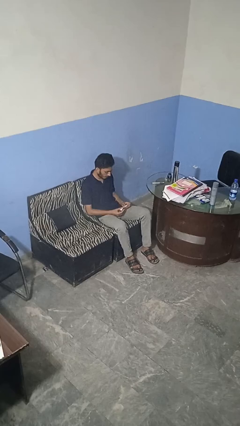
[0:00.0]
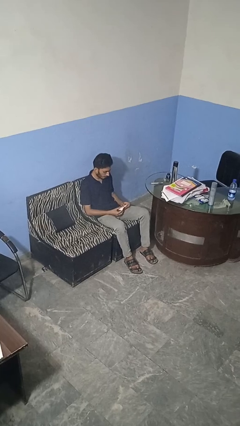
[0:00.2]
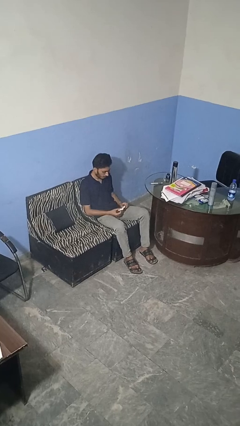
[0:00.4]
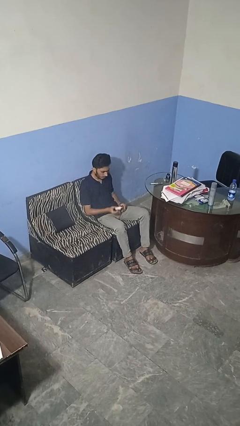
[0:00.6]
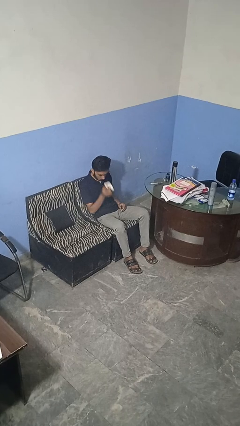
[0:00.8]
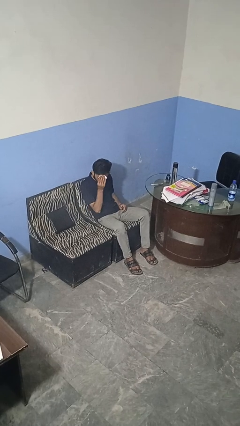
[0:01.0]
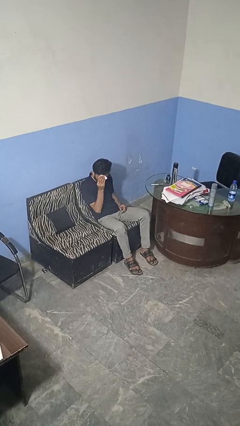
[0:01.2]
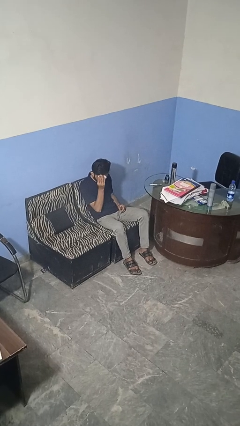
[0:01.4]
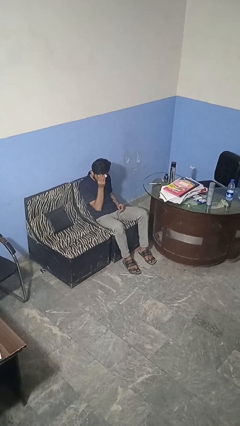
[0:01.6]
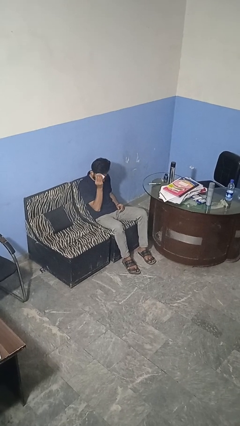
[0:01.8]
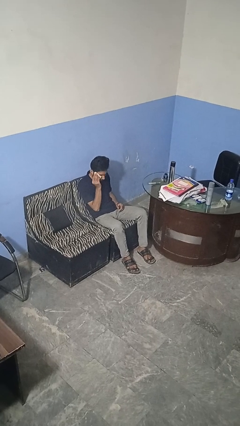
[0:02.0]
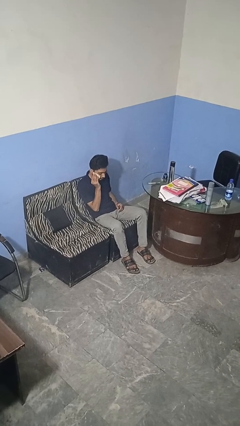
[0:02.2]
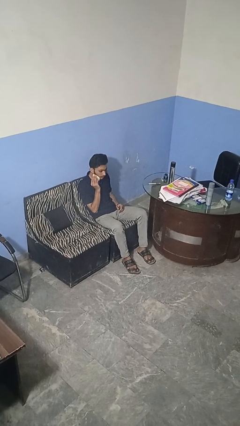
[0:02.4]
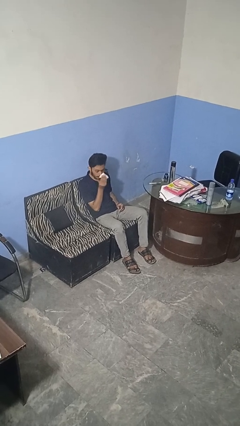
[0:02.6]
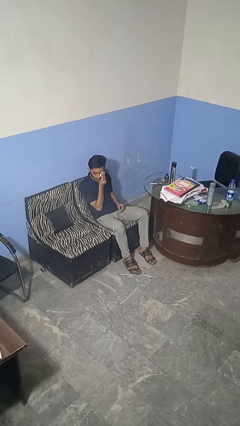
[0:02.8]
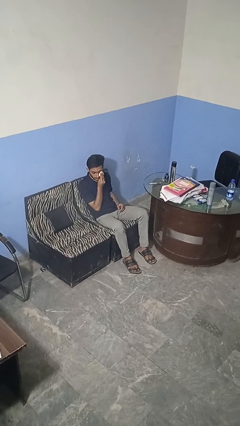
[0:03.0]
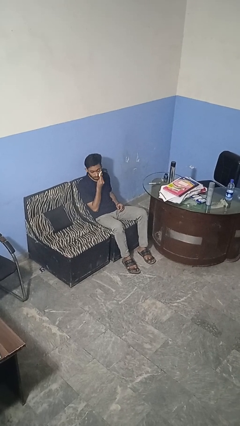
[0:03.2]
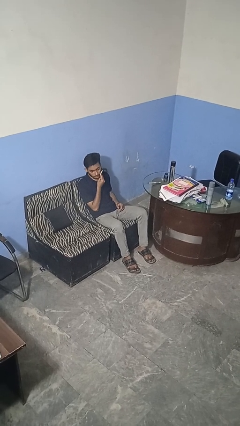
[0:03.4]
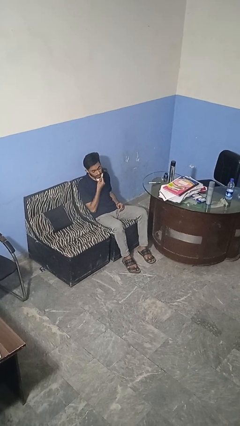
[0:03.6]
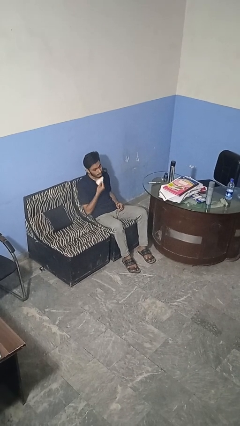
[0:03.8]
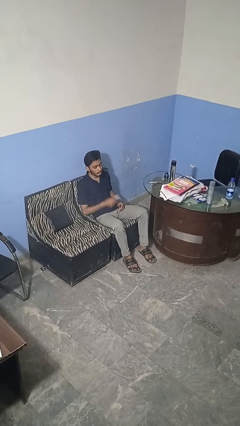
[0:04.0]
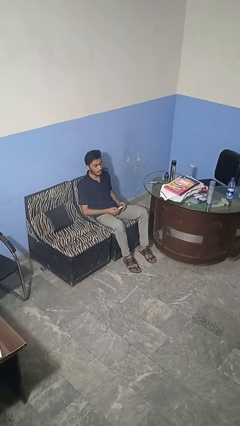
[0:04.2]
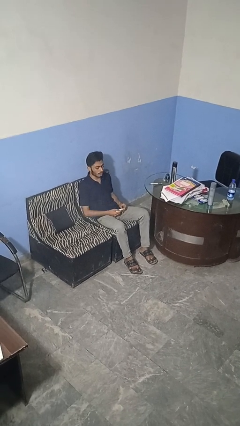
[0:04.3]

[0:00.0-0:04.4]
person wipes mouth with napkin

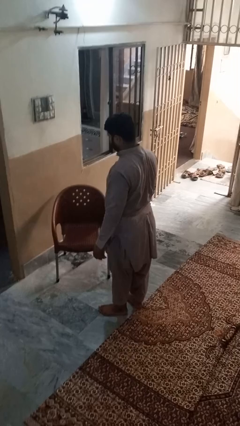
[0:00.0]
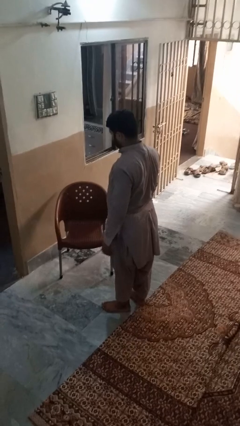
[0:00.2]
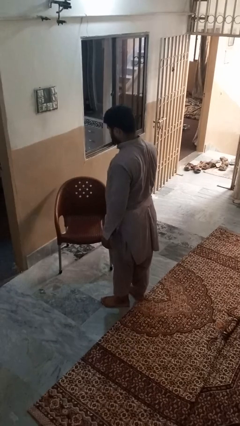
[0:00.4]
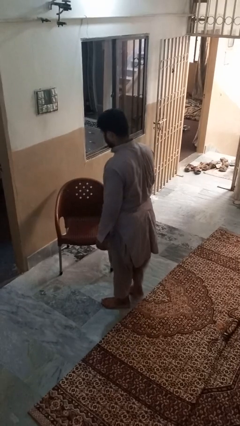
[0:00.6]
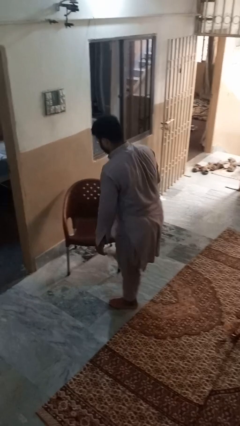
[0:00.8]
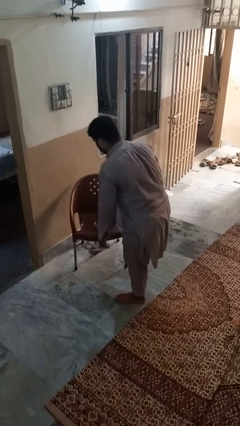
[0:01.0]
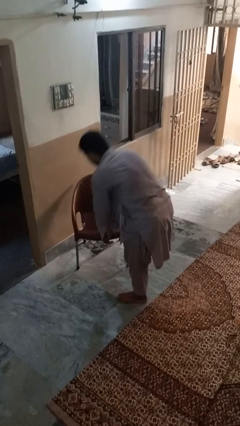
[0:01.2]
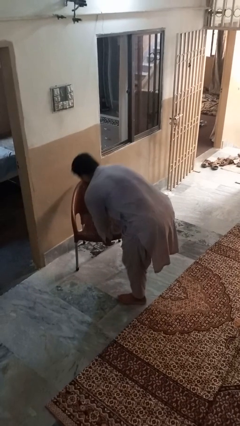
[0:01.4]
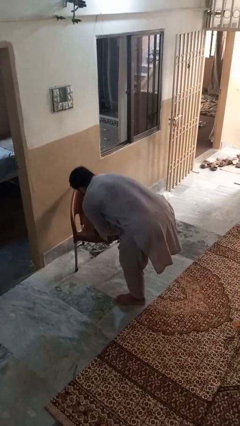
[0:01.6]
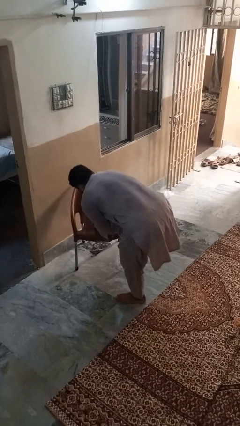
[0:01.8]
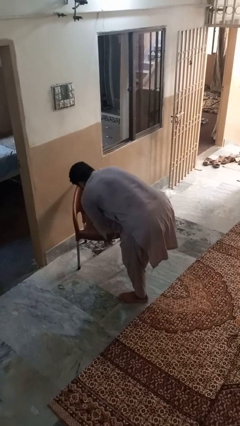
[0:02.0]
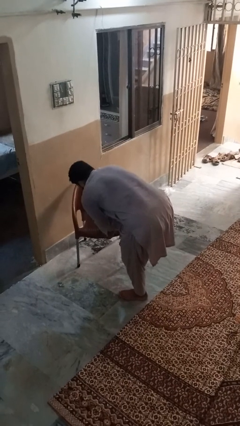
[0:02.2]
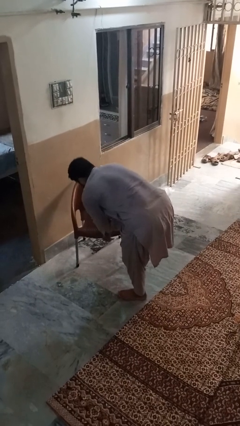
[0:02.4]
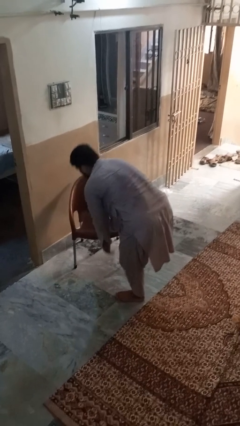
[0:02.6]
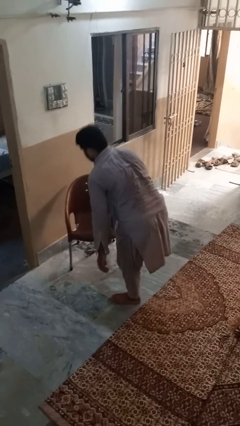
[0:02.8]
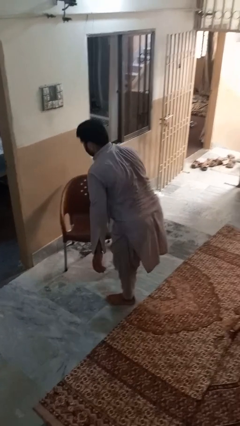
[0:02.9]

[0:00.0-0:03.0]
person stubs toe

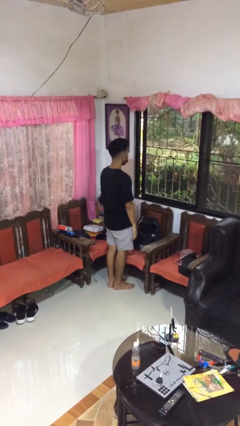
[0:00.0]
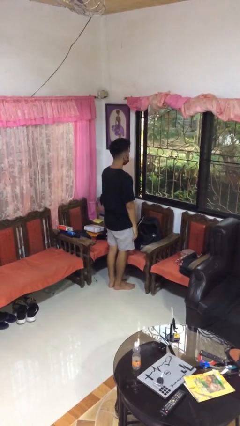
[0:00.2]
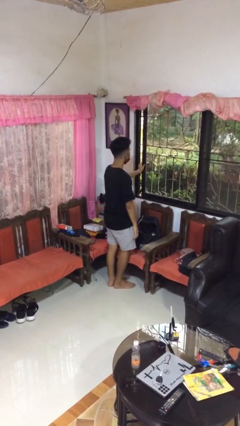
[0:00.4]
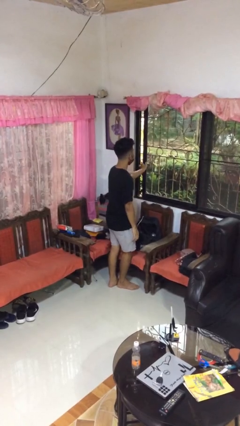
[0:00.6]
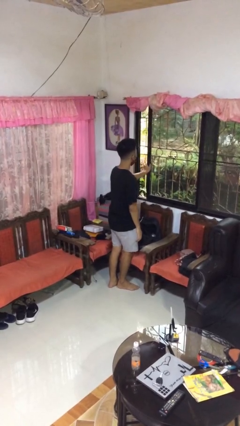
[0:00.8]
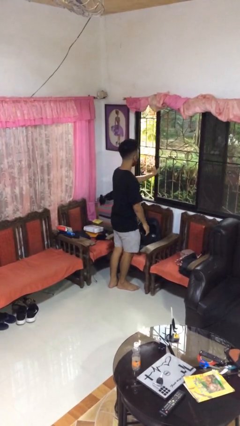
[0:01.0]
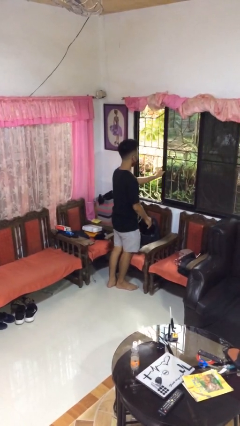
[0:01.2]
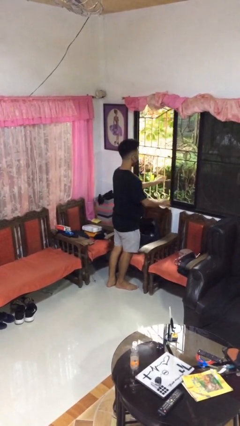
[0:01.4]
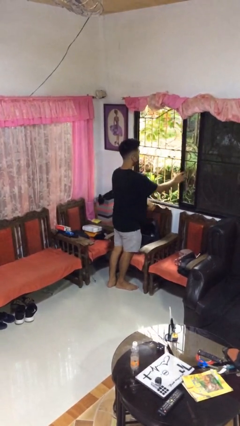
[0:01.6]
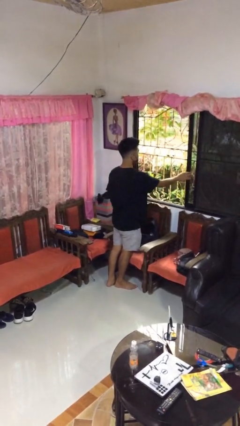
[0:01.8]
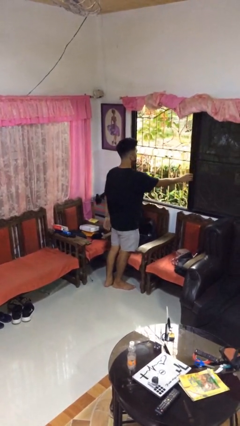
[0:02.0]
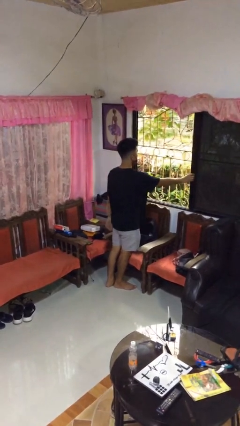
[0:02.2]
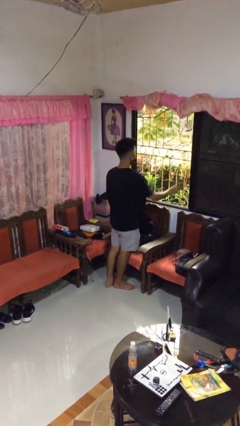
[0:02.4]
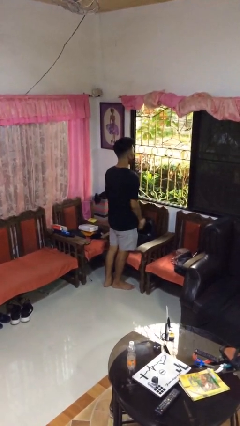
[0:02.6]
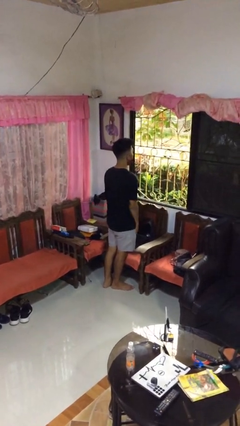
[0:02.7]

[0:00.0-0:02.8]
person opens home window

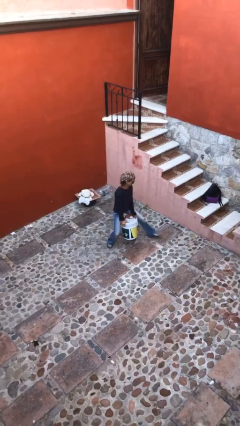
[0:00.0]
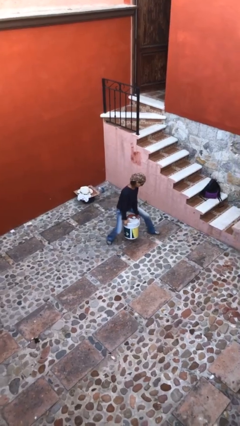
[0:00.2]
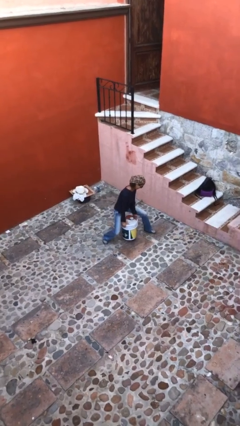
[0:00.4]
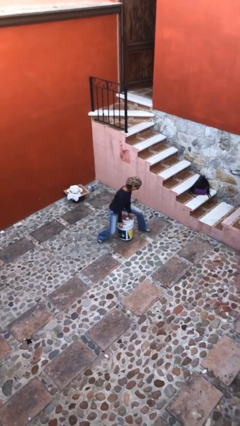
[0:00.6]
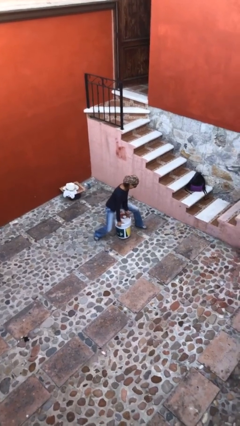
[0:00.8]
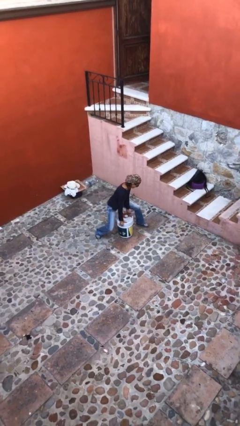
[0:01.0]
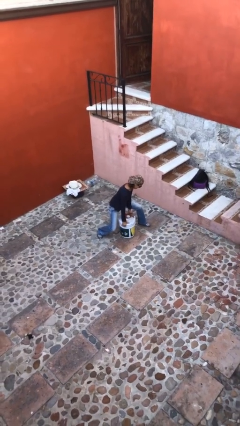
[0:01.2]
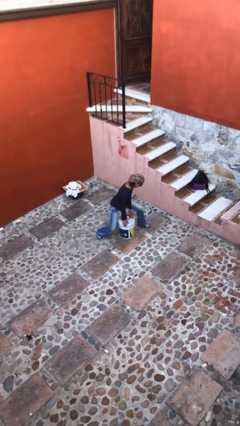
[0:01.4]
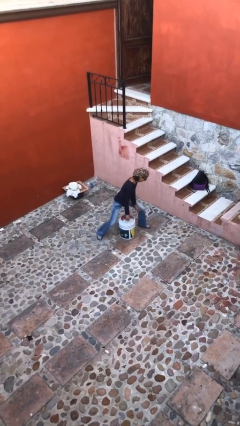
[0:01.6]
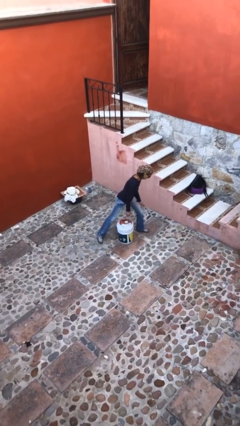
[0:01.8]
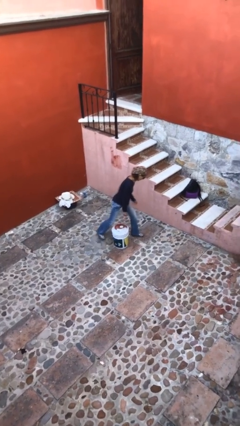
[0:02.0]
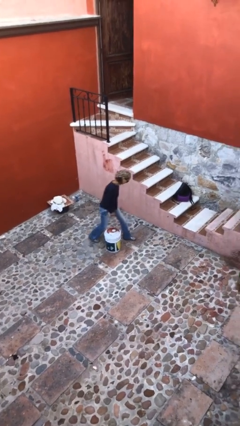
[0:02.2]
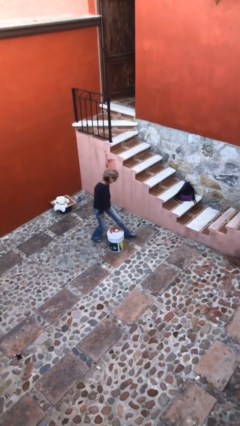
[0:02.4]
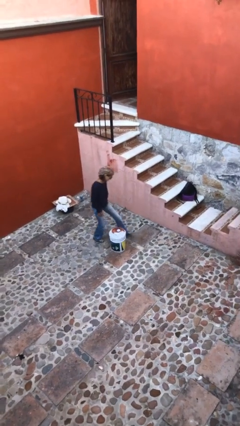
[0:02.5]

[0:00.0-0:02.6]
person puts down object on floor

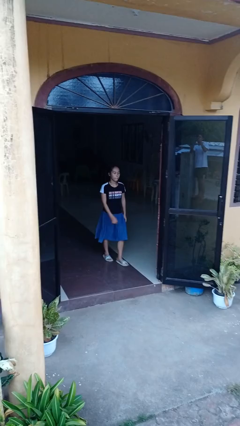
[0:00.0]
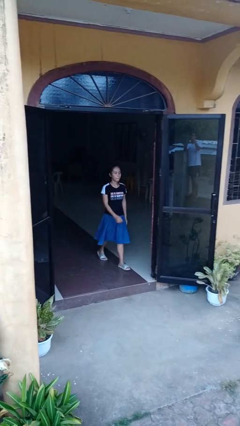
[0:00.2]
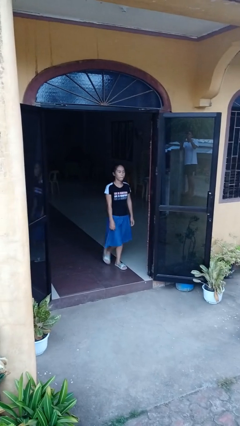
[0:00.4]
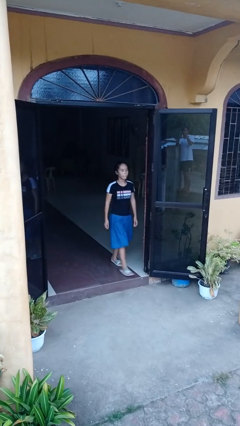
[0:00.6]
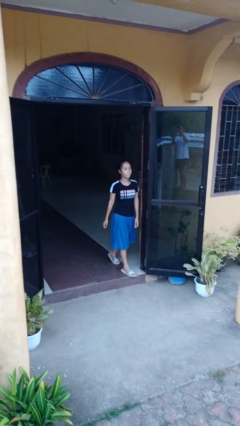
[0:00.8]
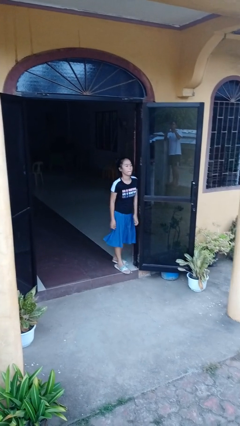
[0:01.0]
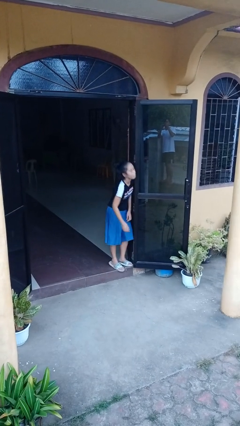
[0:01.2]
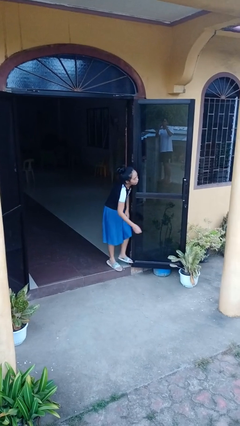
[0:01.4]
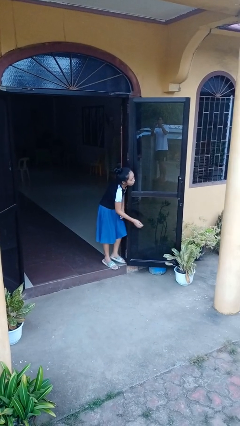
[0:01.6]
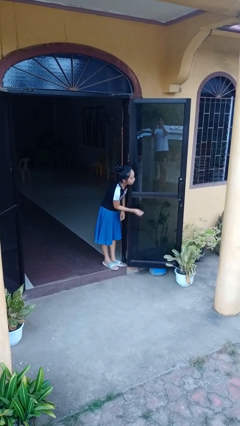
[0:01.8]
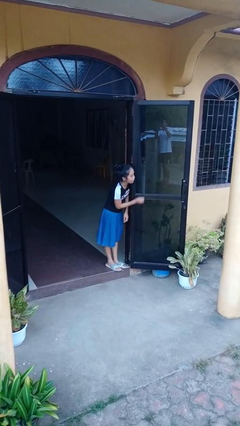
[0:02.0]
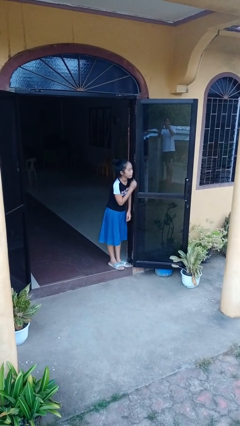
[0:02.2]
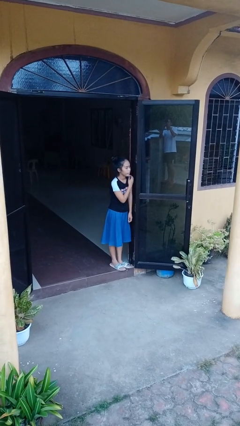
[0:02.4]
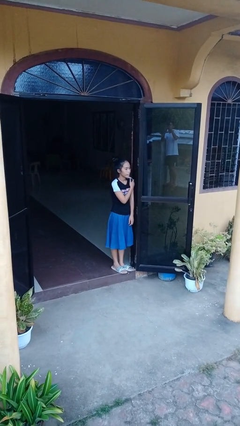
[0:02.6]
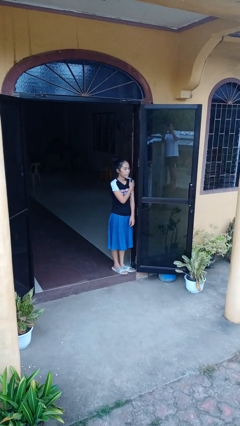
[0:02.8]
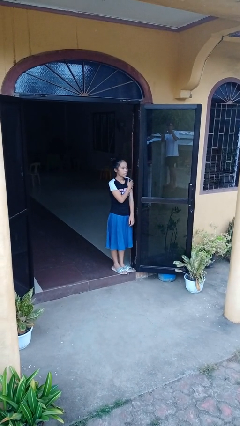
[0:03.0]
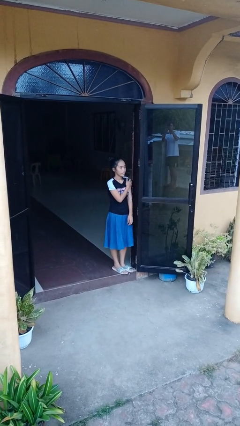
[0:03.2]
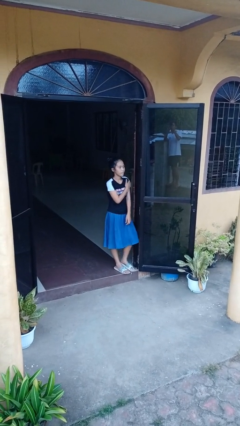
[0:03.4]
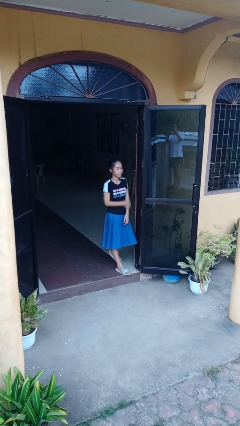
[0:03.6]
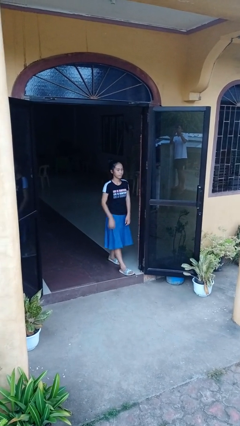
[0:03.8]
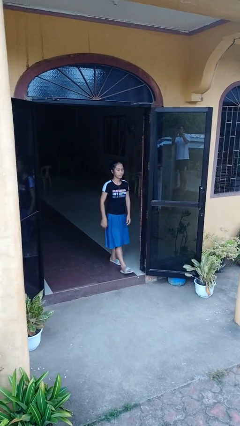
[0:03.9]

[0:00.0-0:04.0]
person bumps into wall

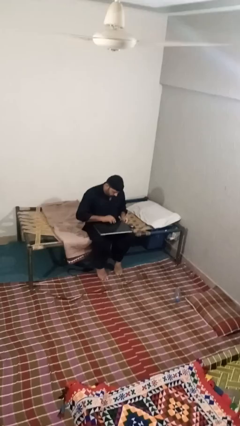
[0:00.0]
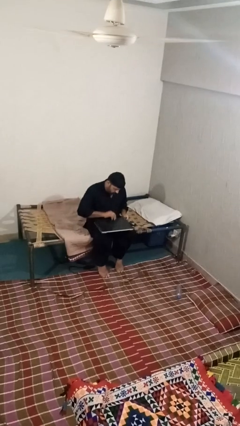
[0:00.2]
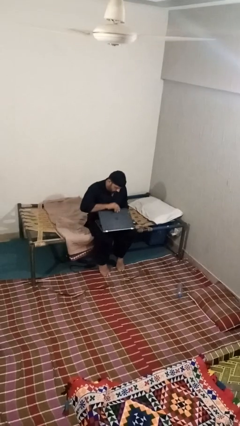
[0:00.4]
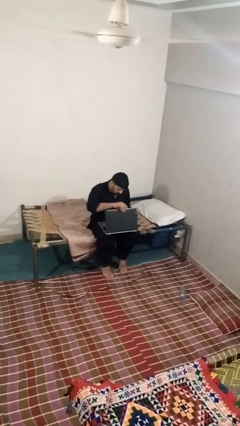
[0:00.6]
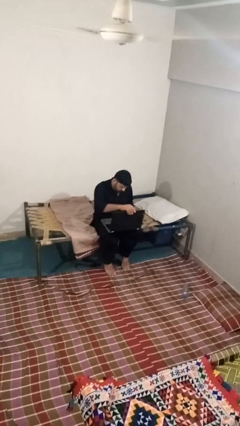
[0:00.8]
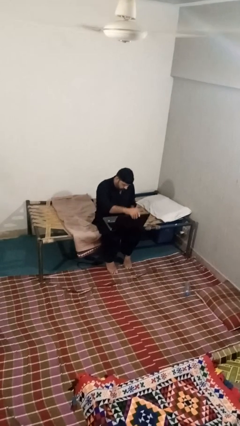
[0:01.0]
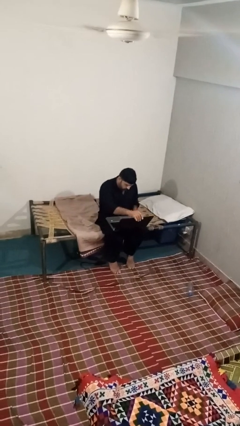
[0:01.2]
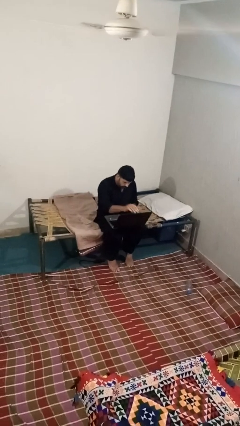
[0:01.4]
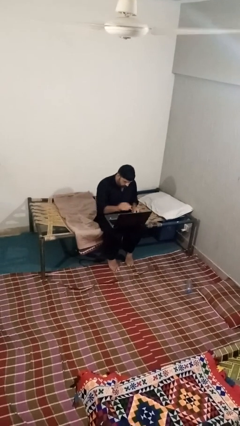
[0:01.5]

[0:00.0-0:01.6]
person opens laptop
